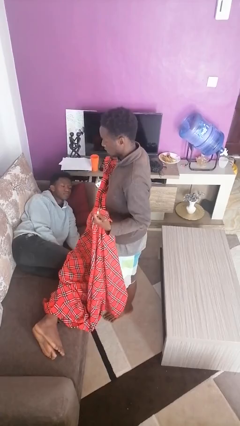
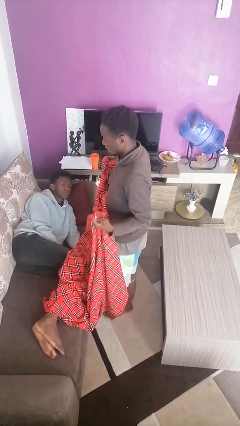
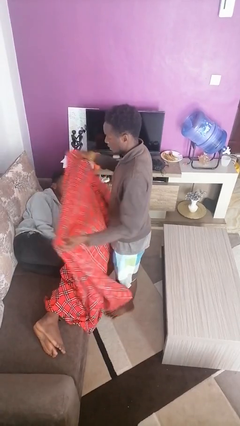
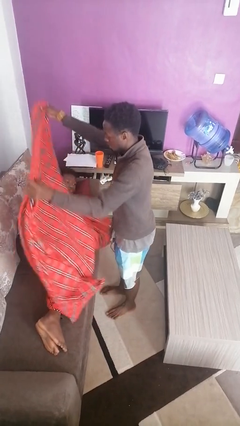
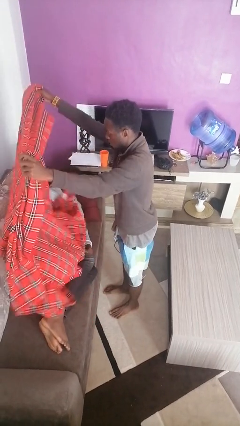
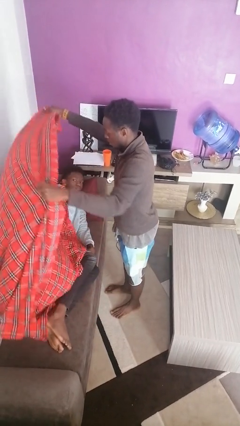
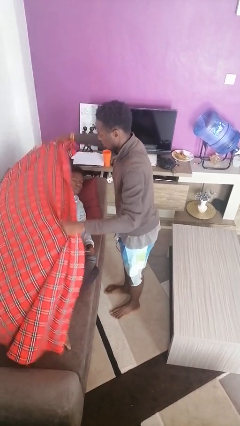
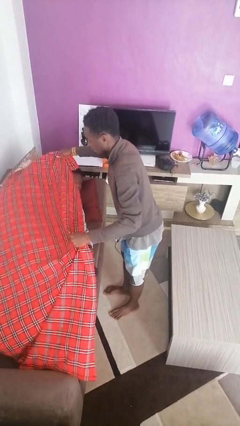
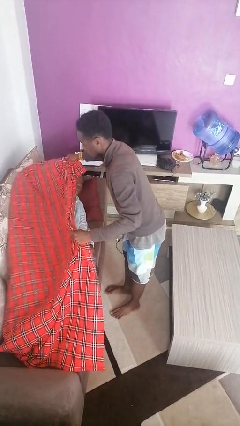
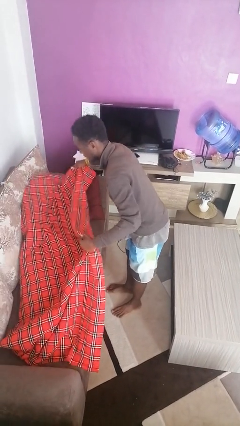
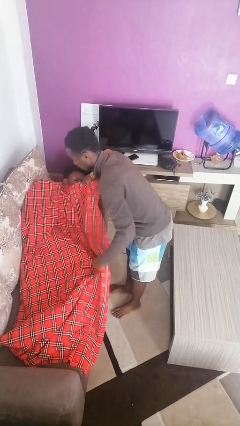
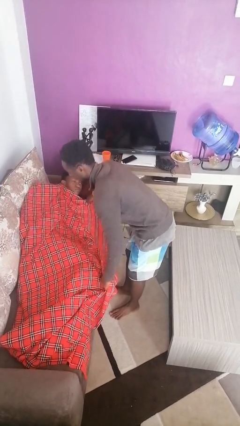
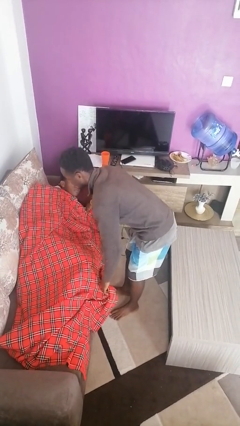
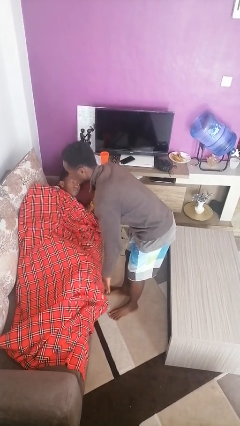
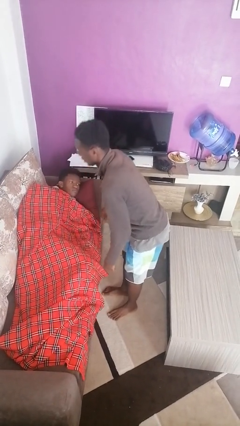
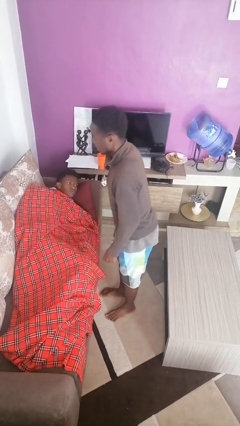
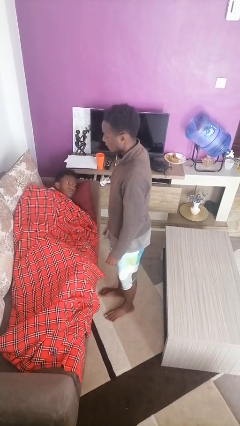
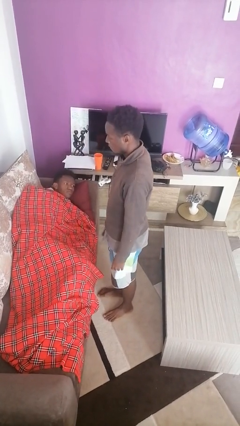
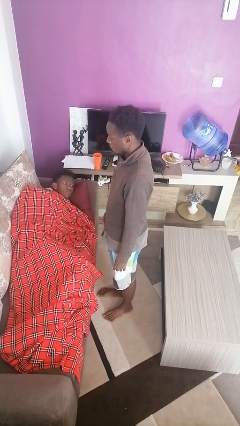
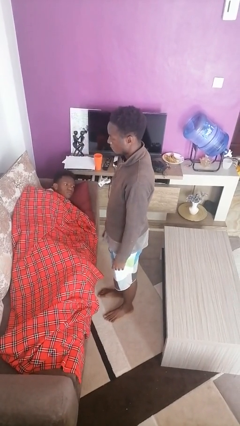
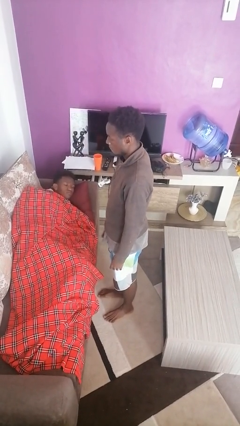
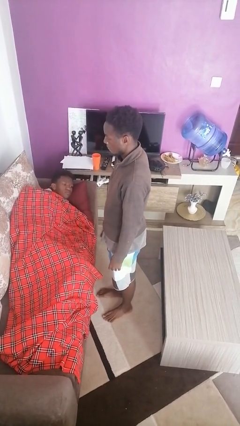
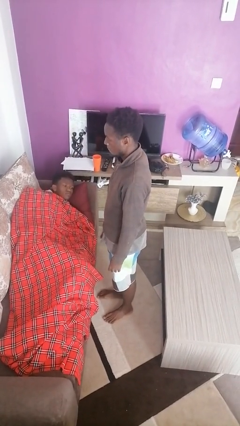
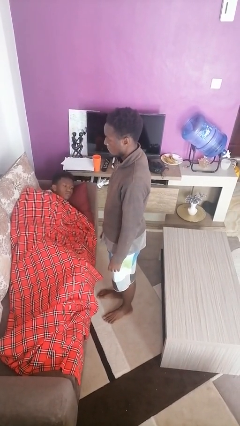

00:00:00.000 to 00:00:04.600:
person covers friend with blanket

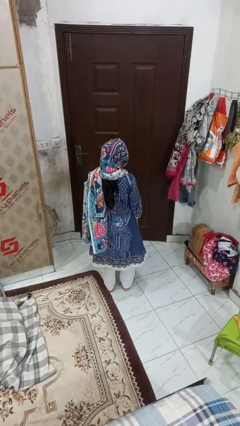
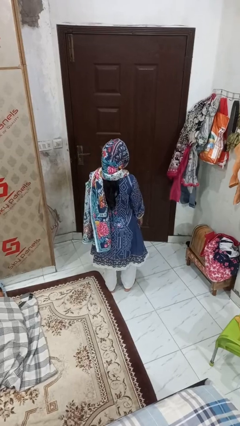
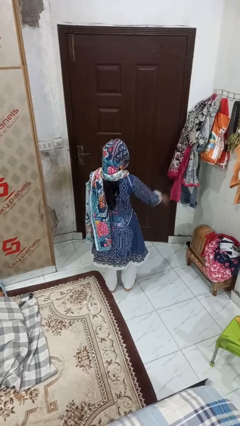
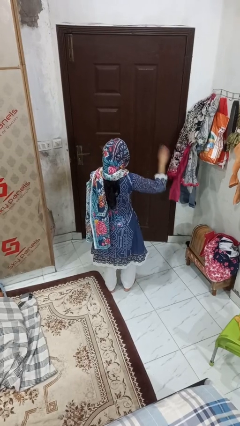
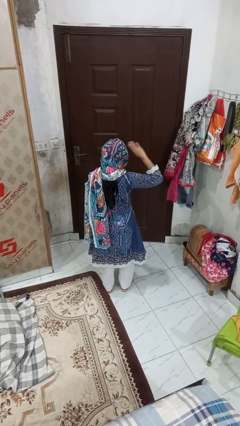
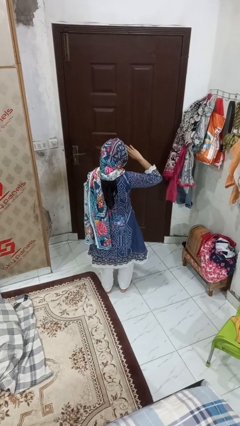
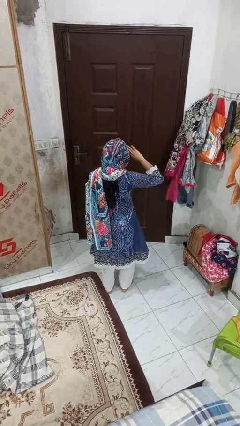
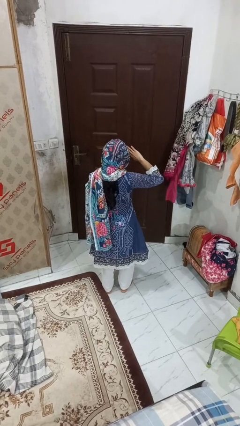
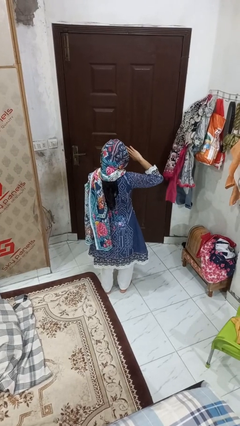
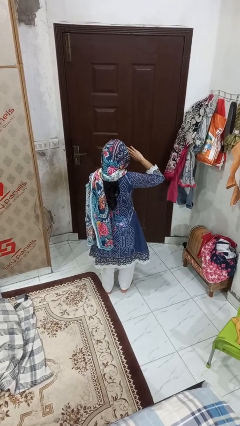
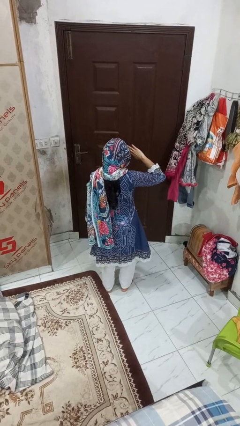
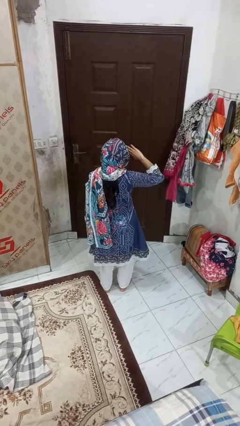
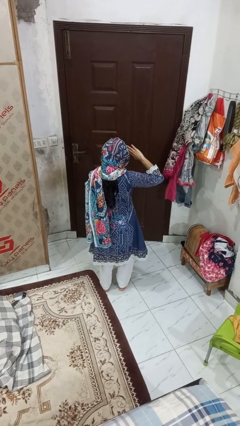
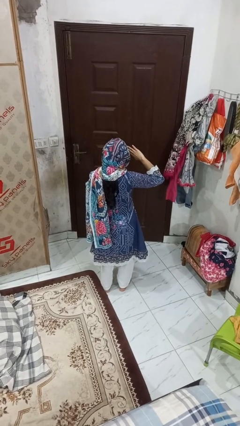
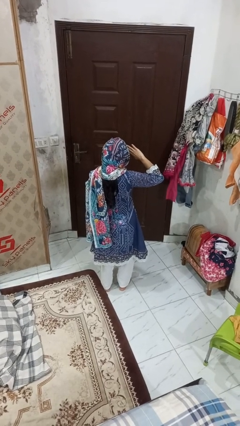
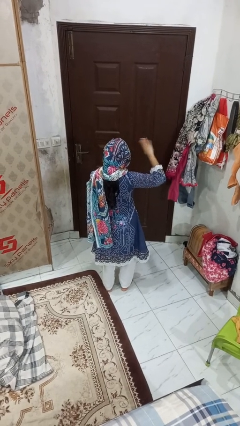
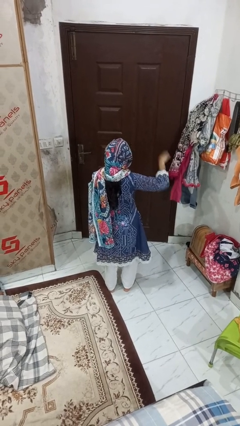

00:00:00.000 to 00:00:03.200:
person salutes

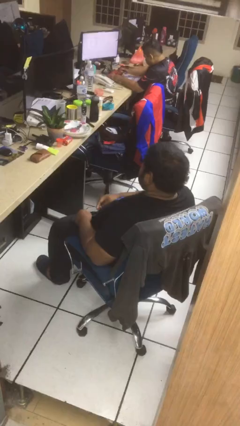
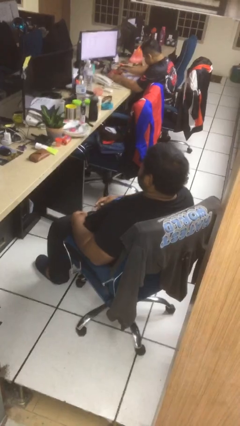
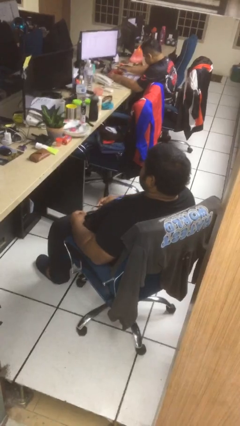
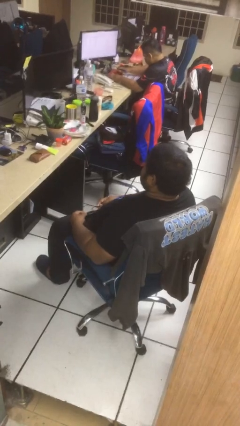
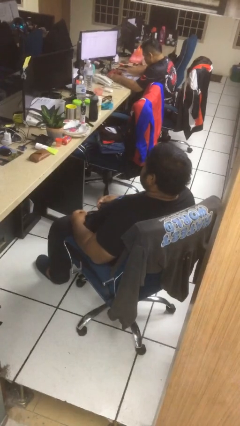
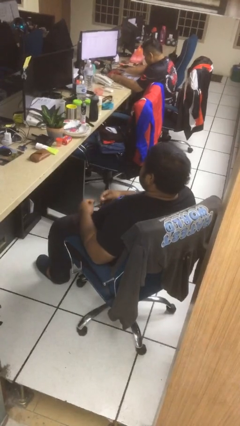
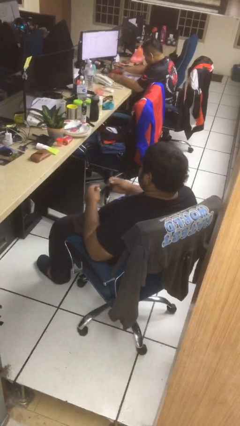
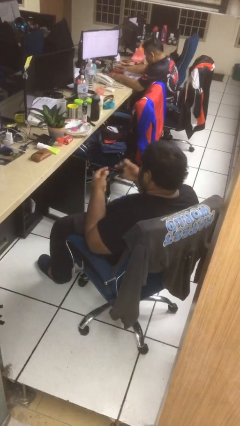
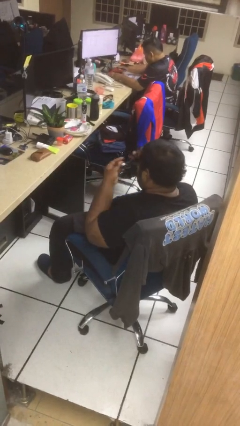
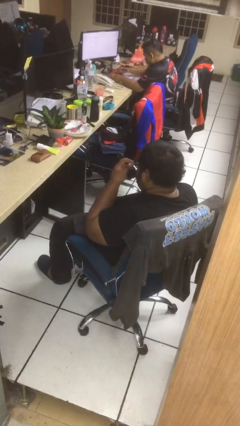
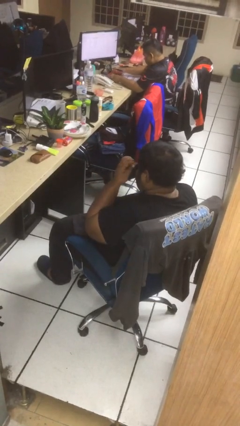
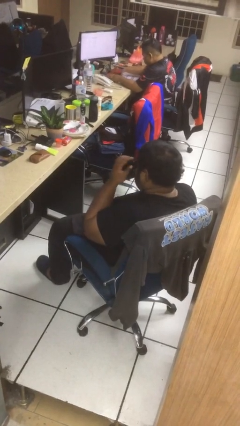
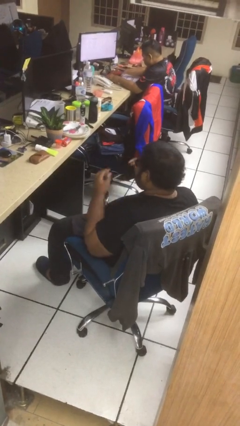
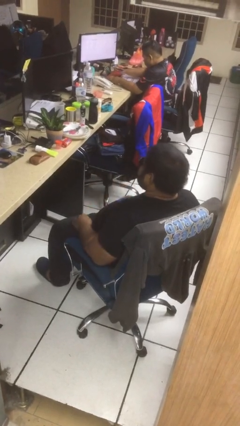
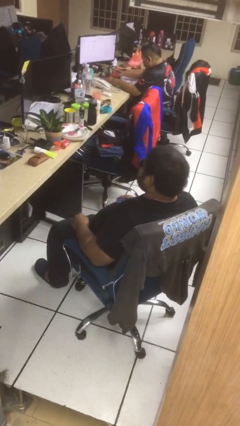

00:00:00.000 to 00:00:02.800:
person puts on sunglasses

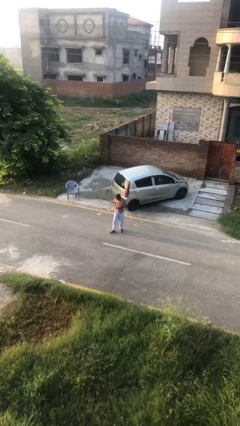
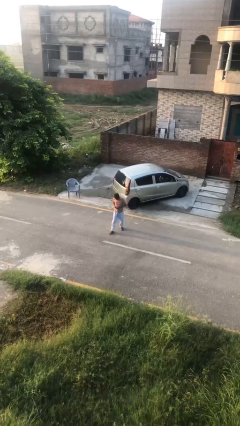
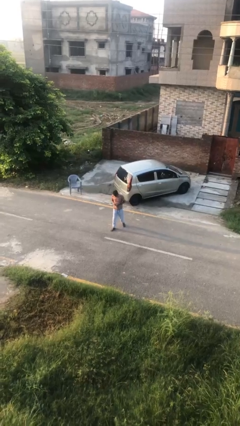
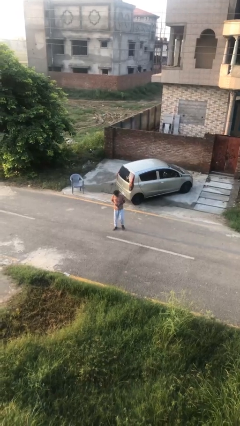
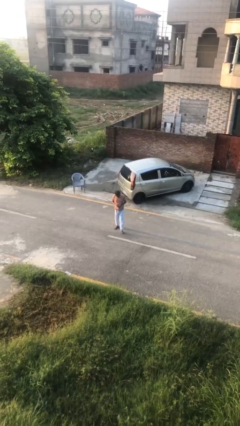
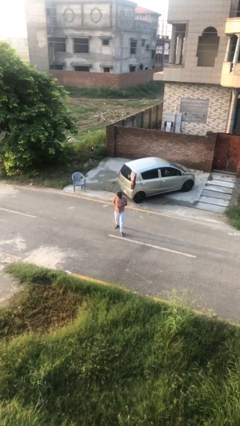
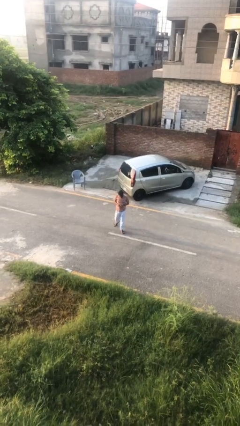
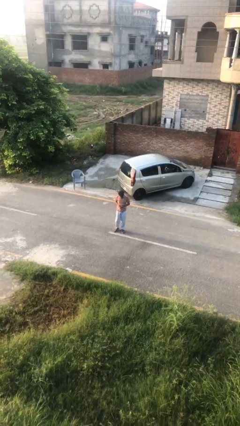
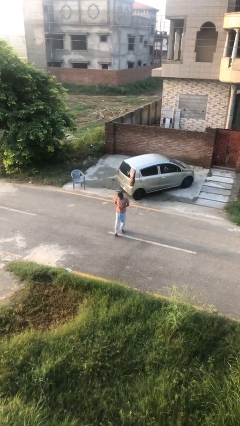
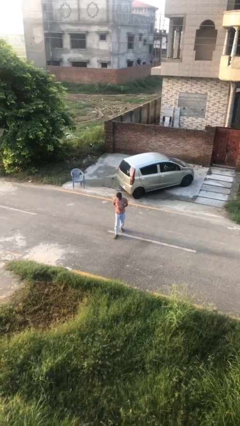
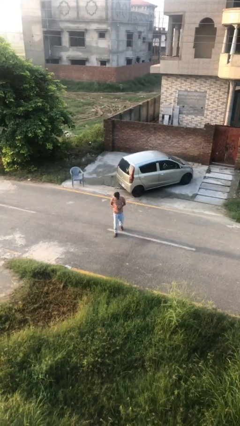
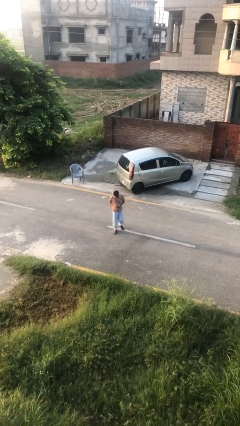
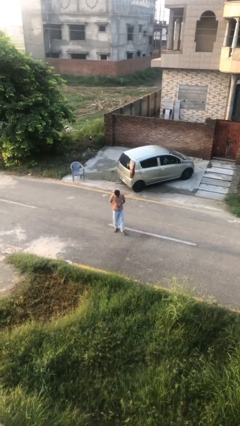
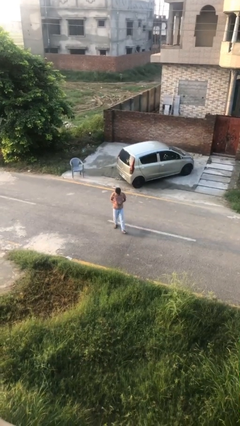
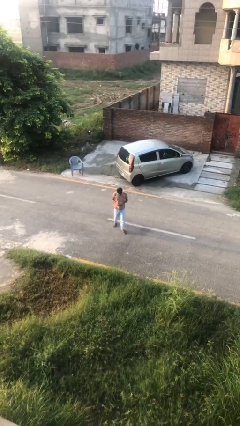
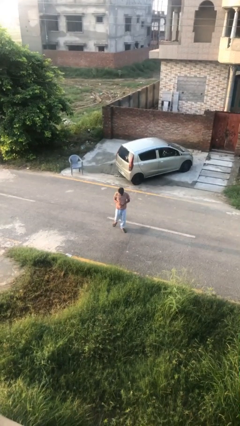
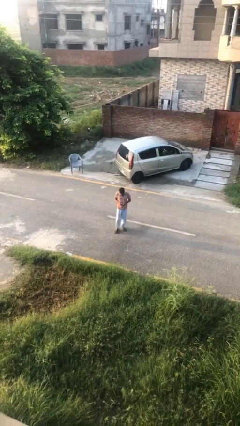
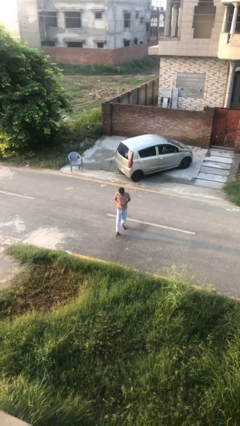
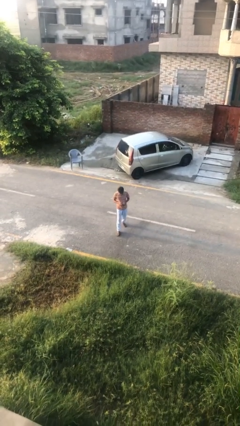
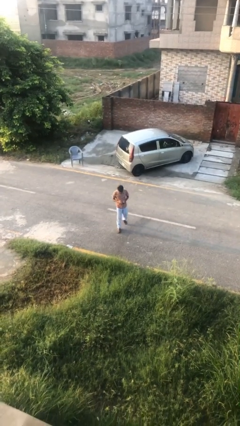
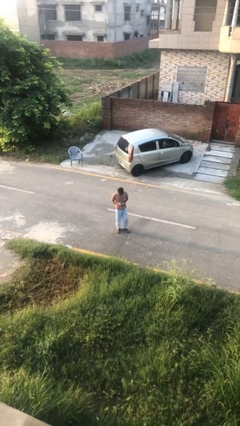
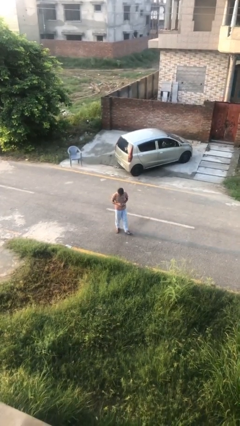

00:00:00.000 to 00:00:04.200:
person texts on phone

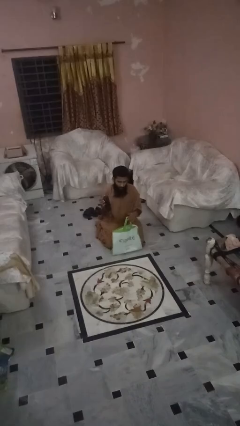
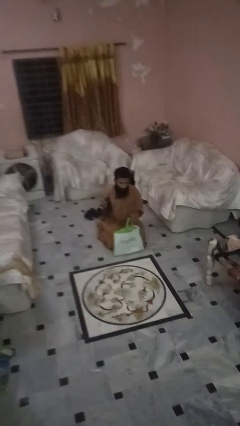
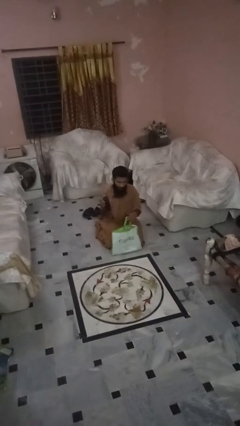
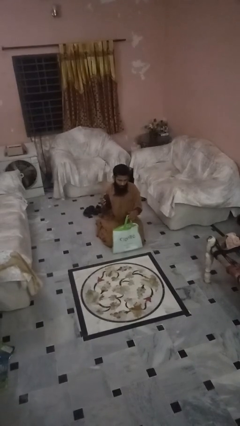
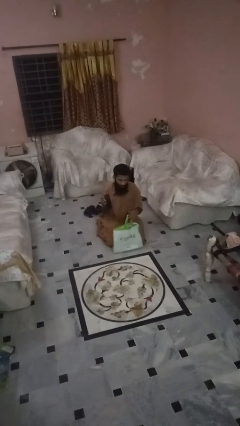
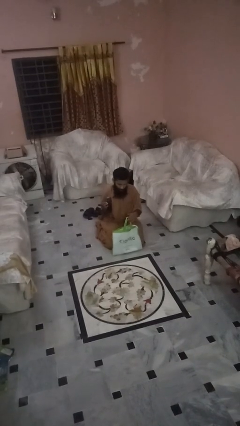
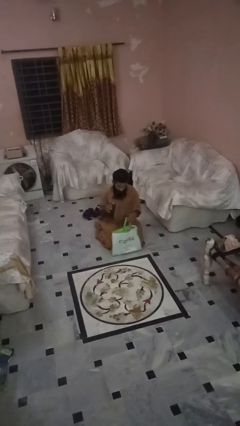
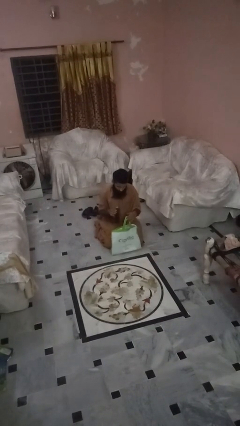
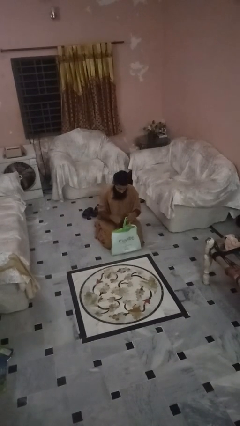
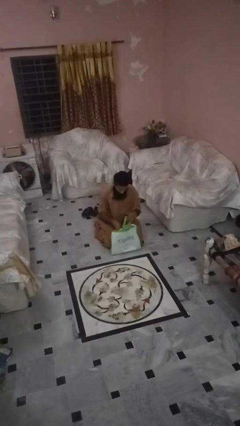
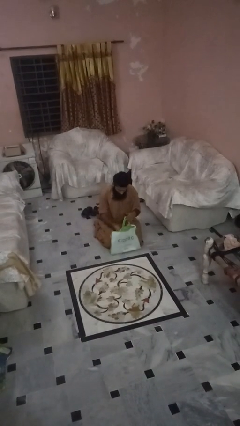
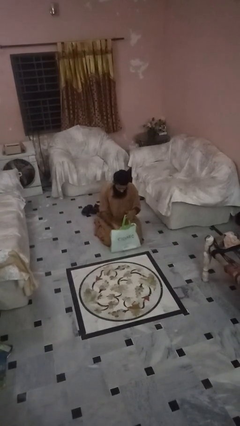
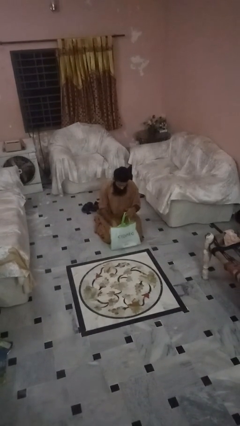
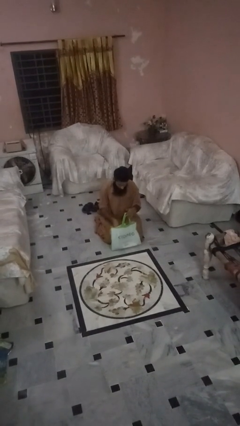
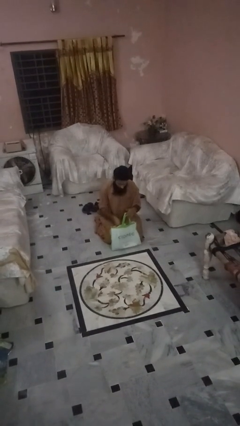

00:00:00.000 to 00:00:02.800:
person puts object into bag
